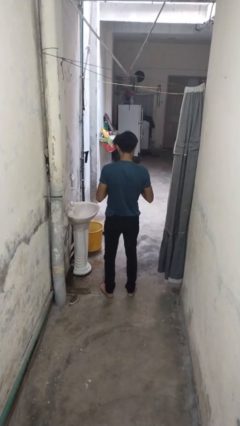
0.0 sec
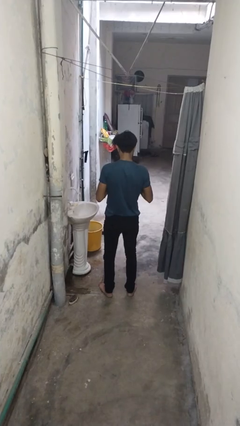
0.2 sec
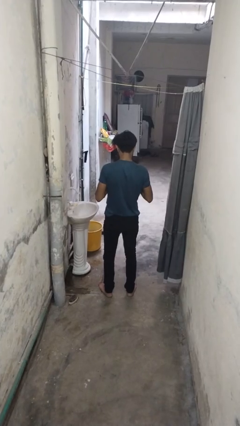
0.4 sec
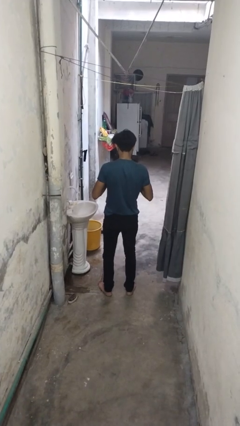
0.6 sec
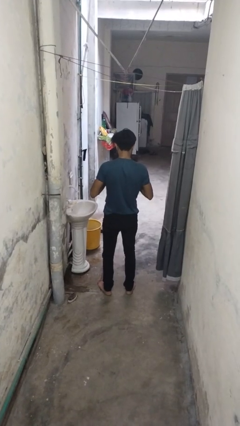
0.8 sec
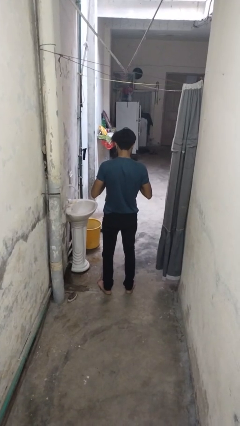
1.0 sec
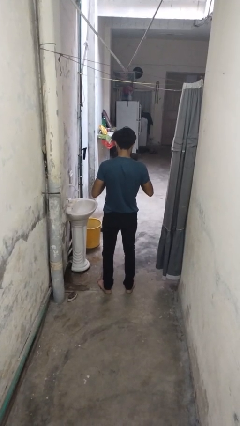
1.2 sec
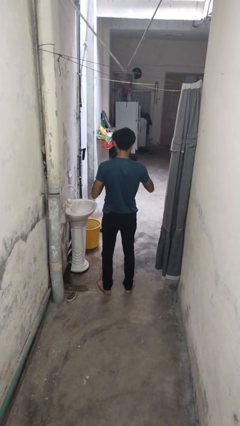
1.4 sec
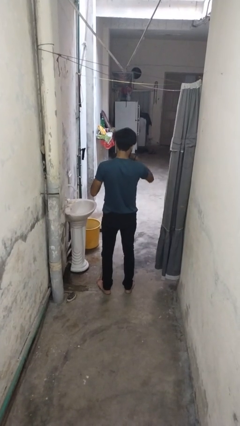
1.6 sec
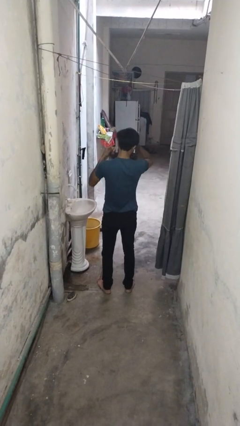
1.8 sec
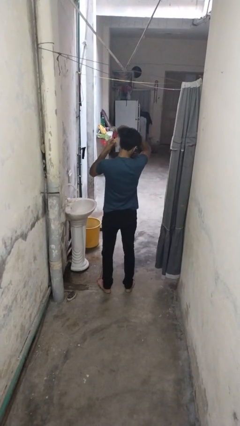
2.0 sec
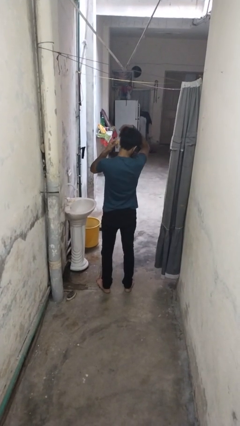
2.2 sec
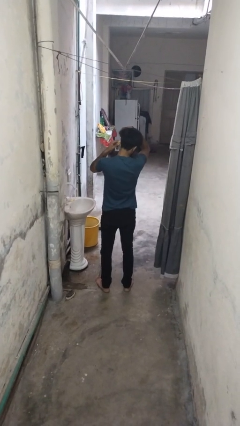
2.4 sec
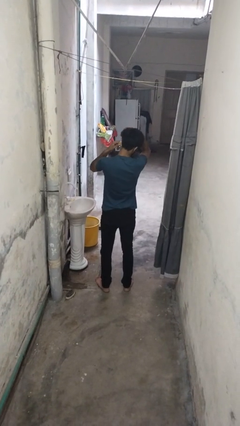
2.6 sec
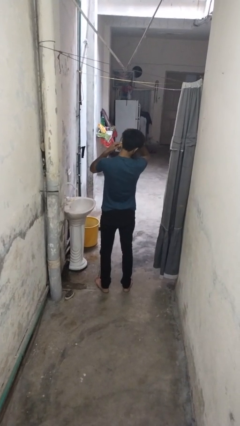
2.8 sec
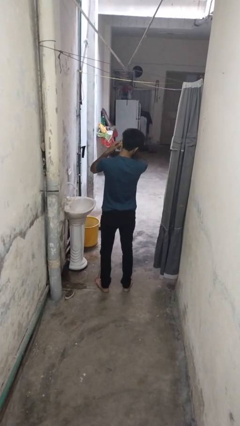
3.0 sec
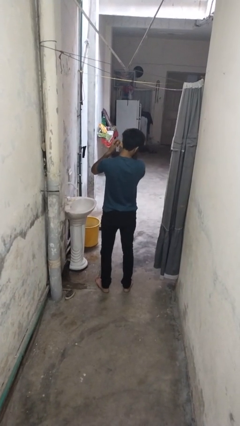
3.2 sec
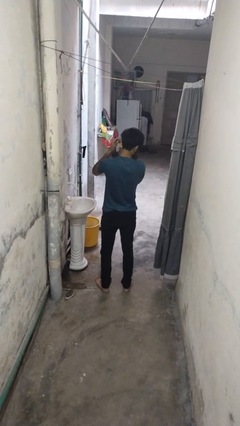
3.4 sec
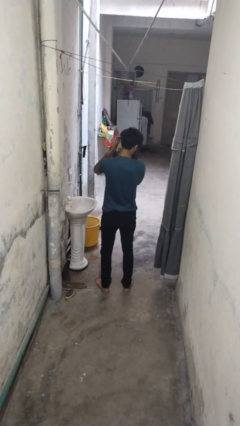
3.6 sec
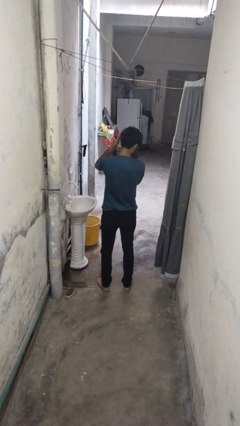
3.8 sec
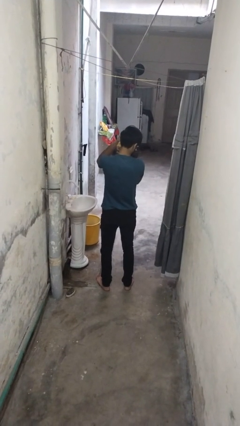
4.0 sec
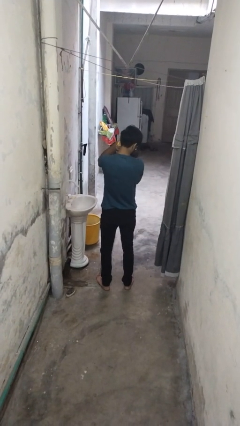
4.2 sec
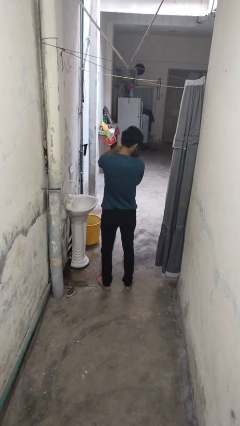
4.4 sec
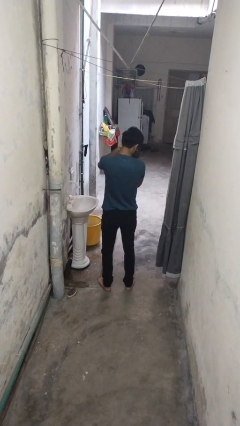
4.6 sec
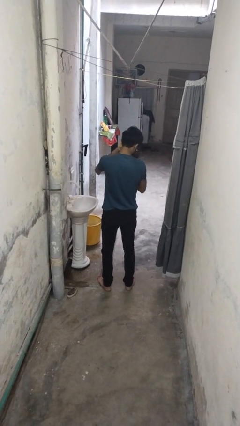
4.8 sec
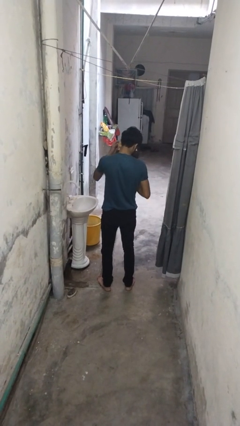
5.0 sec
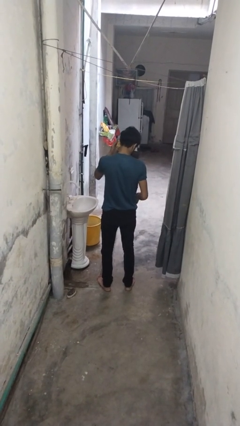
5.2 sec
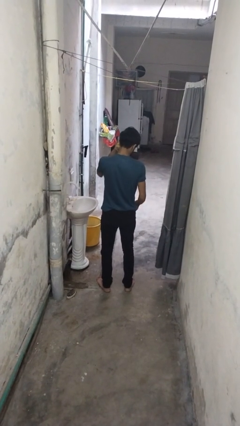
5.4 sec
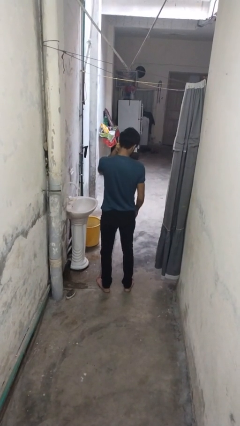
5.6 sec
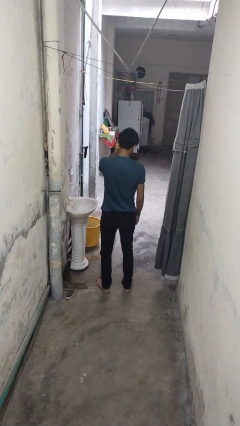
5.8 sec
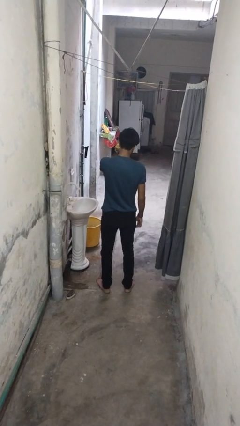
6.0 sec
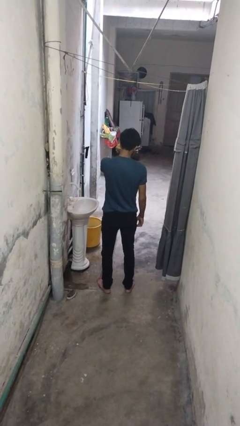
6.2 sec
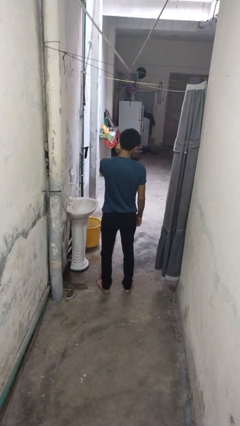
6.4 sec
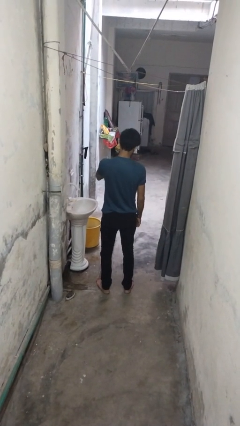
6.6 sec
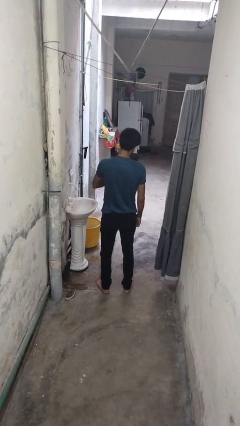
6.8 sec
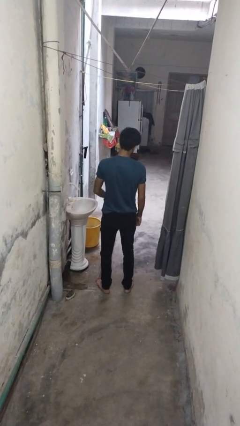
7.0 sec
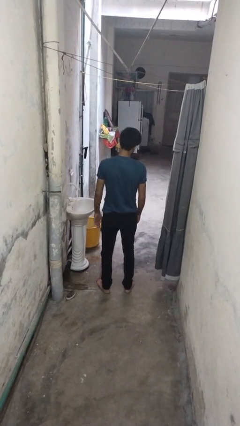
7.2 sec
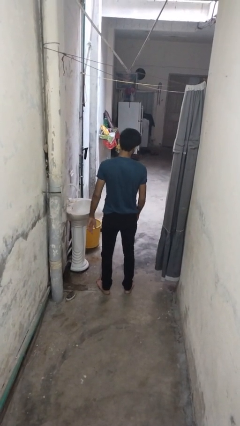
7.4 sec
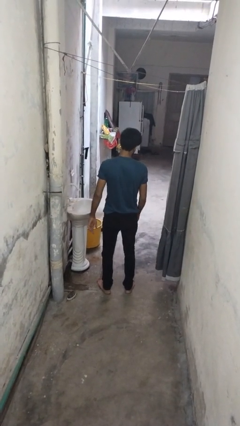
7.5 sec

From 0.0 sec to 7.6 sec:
person puts on earrings

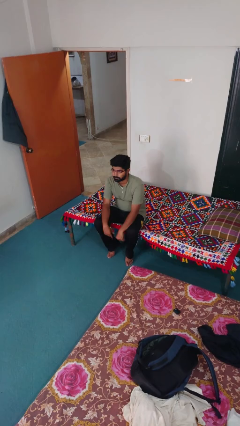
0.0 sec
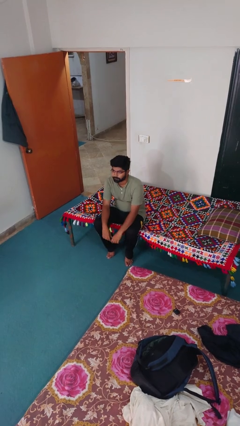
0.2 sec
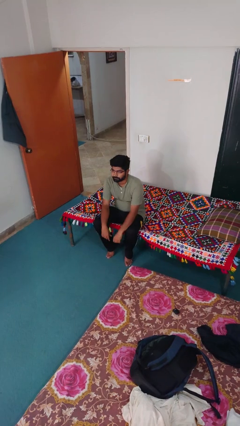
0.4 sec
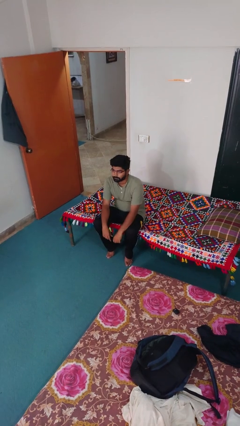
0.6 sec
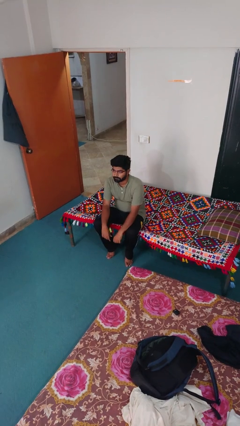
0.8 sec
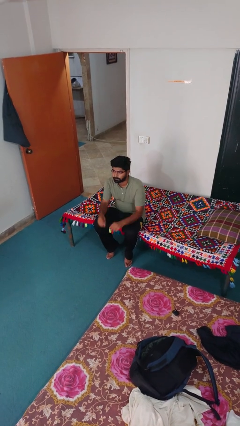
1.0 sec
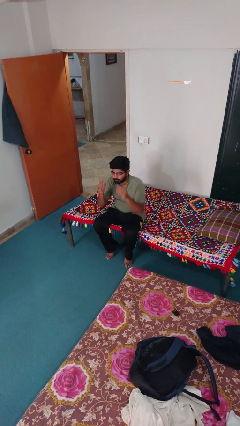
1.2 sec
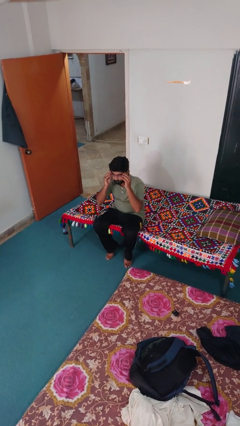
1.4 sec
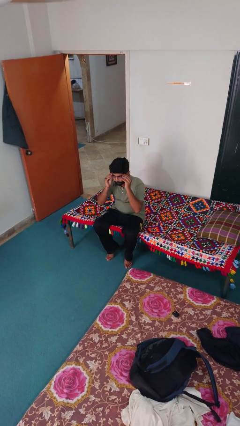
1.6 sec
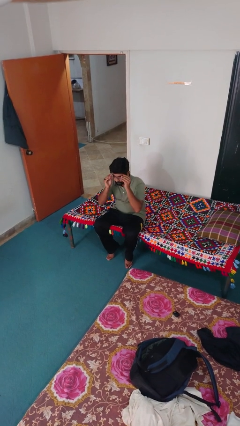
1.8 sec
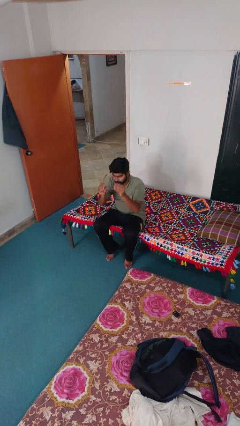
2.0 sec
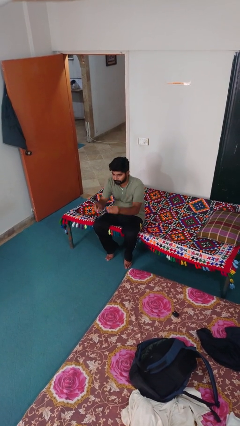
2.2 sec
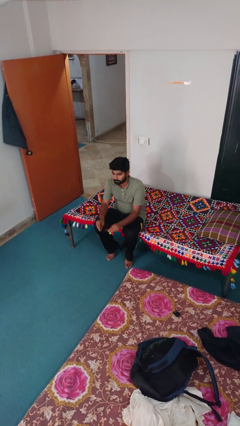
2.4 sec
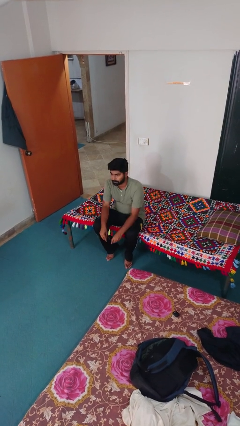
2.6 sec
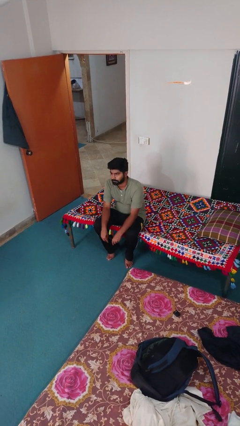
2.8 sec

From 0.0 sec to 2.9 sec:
person takes off glasses

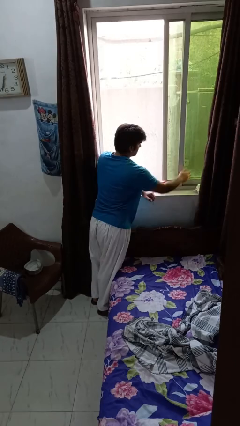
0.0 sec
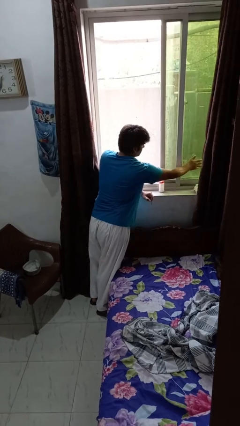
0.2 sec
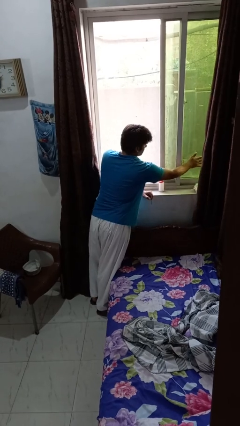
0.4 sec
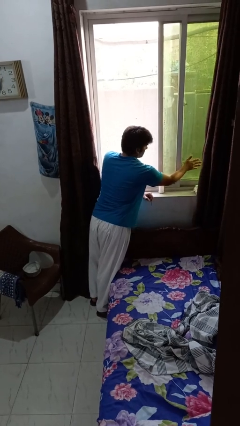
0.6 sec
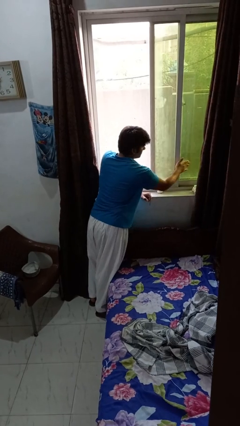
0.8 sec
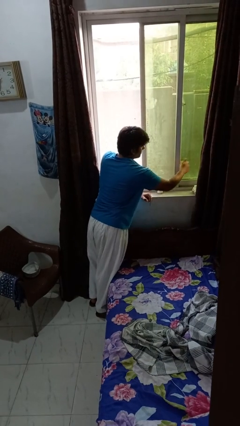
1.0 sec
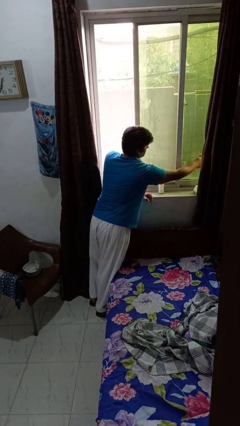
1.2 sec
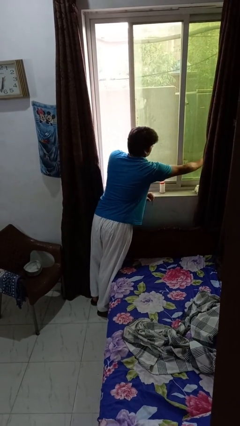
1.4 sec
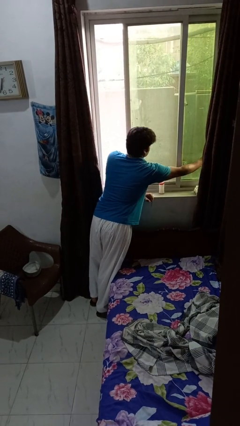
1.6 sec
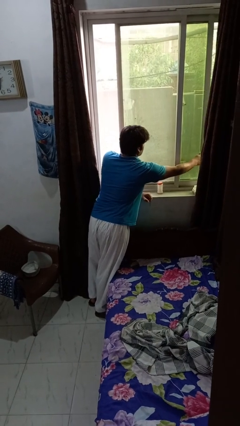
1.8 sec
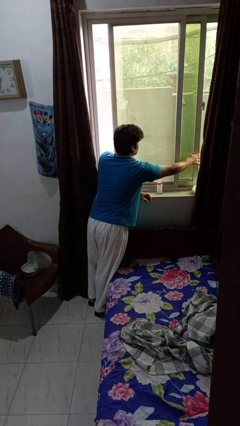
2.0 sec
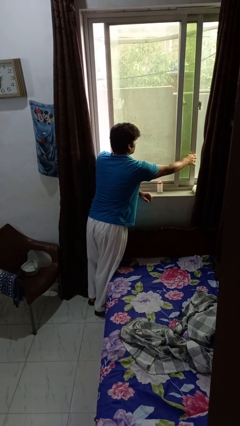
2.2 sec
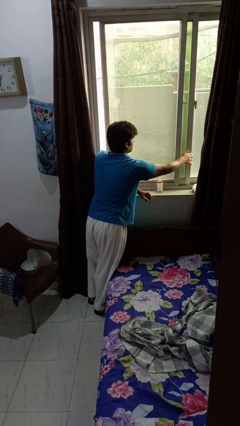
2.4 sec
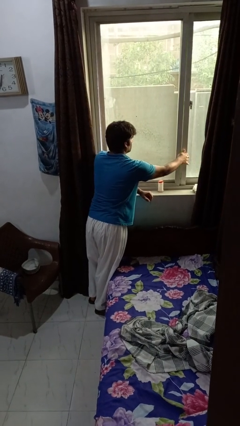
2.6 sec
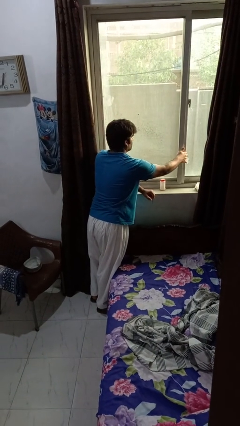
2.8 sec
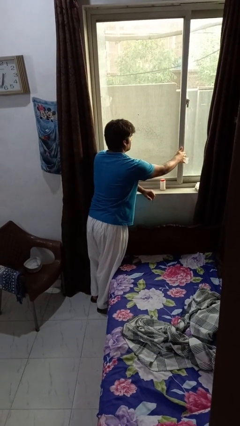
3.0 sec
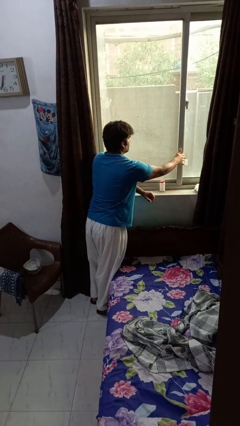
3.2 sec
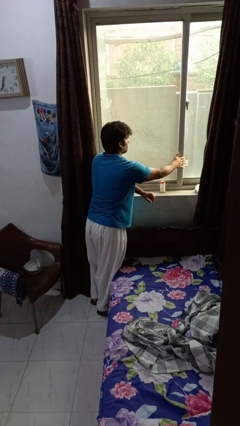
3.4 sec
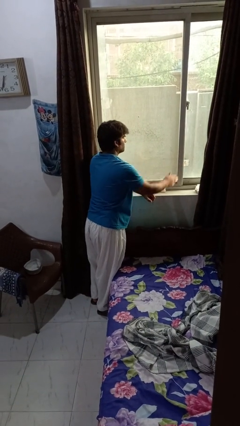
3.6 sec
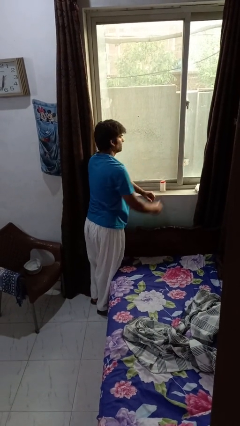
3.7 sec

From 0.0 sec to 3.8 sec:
person closes home window

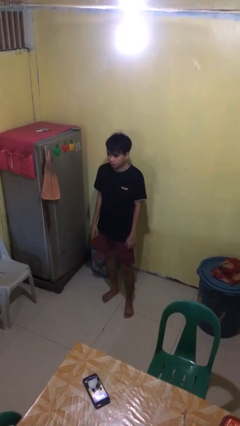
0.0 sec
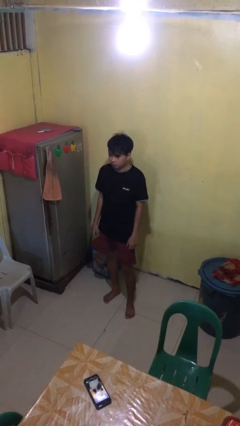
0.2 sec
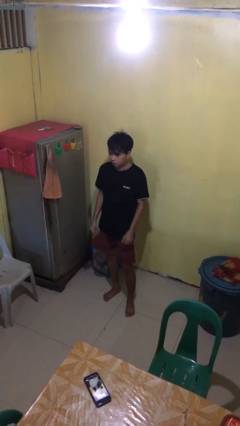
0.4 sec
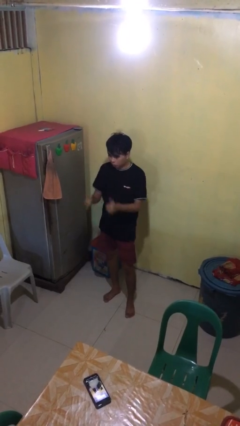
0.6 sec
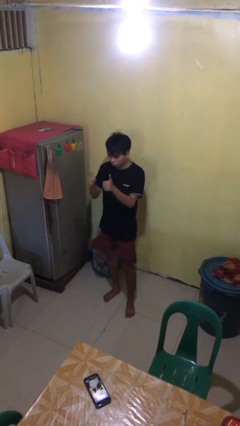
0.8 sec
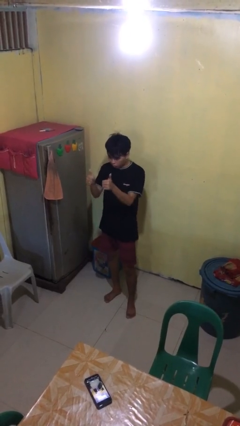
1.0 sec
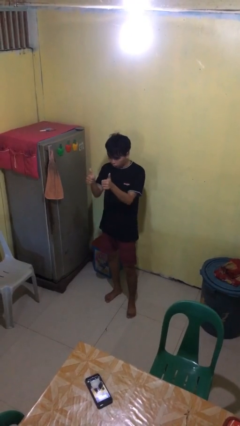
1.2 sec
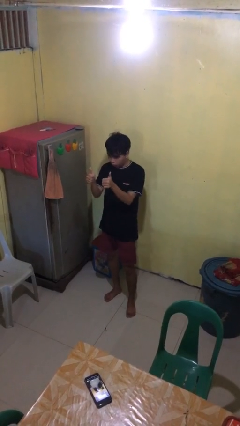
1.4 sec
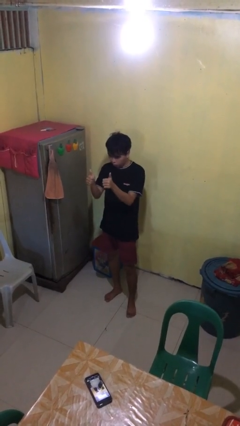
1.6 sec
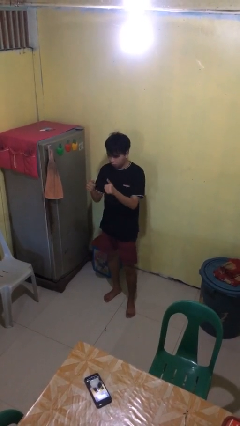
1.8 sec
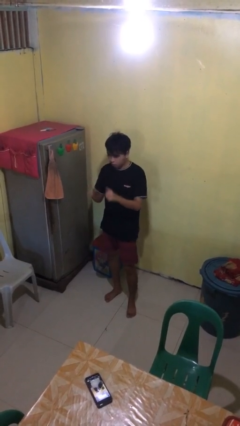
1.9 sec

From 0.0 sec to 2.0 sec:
person gestures thumbs up

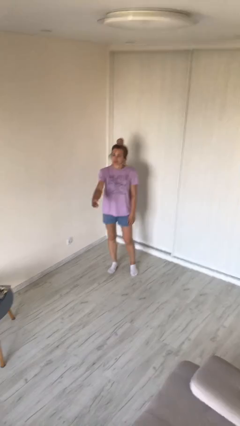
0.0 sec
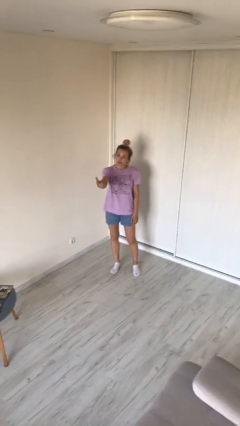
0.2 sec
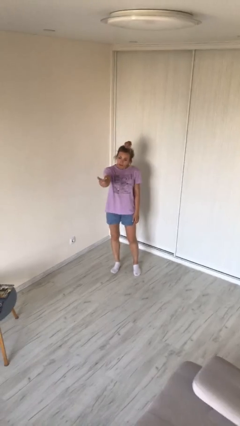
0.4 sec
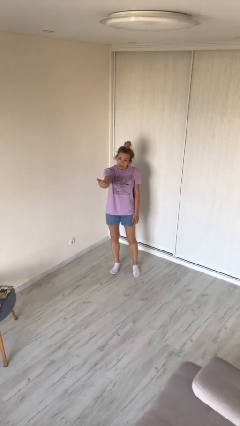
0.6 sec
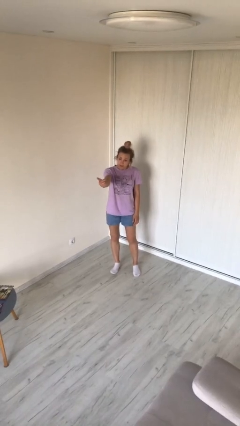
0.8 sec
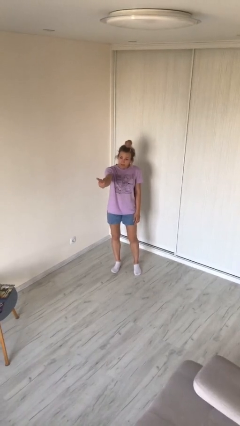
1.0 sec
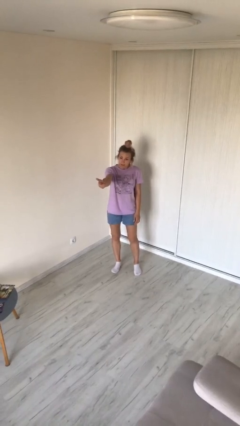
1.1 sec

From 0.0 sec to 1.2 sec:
person gestures come here

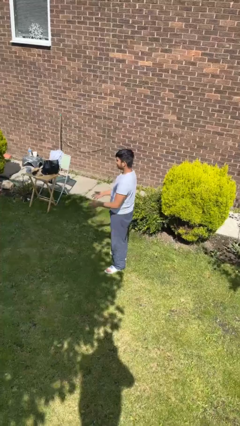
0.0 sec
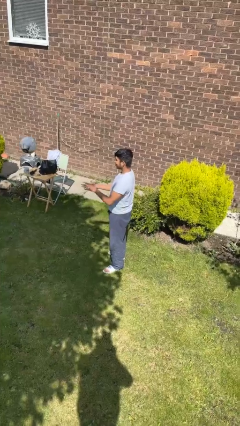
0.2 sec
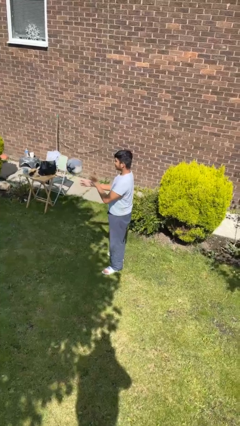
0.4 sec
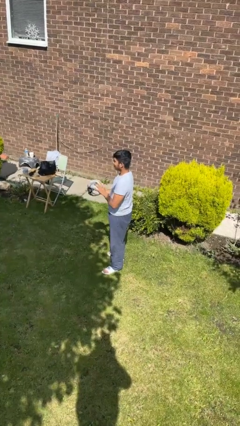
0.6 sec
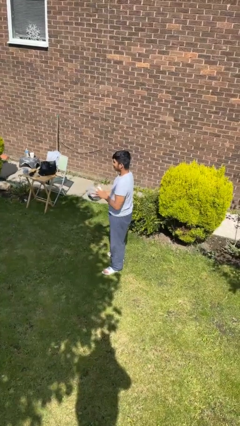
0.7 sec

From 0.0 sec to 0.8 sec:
person catches object from person
